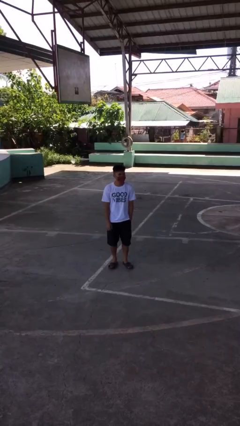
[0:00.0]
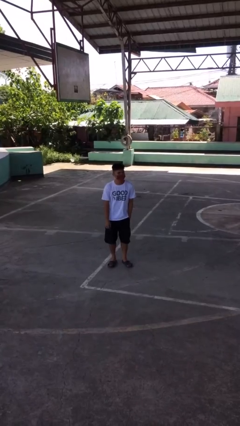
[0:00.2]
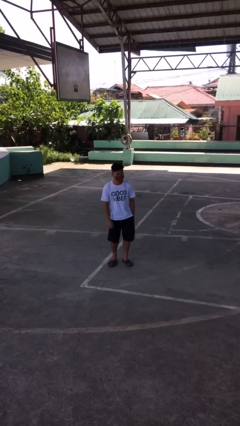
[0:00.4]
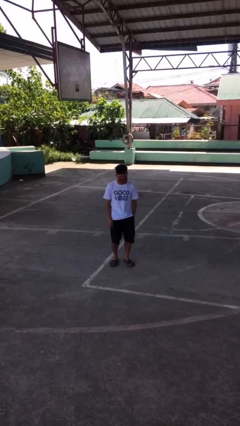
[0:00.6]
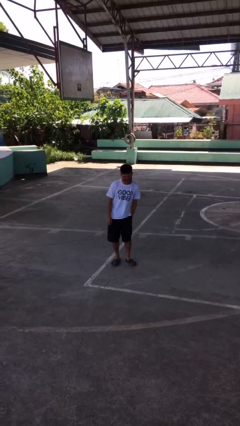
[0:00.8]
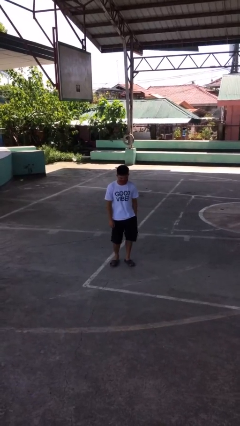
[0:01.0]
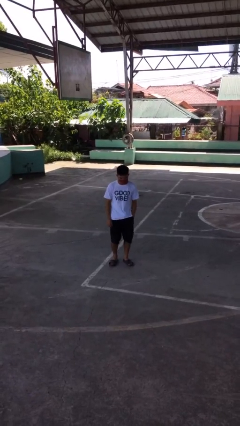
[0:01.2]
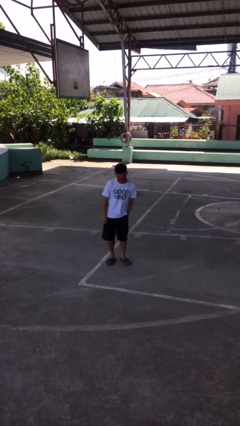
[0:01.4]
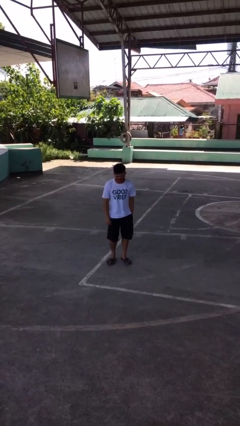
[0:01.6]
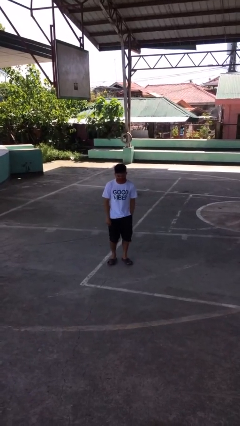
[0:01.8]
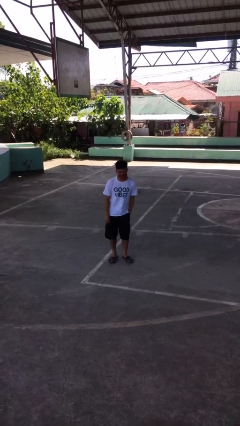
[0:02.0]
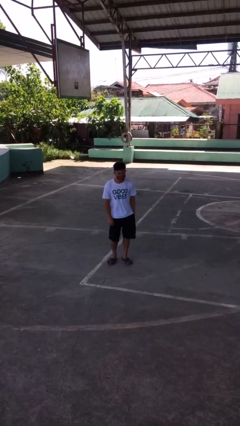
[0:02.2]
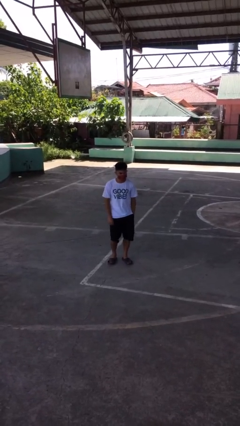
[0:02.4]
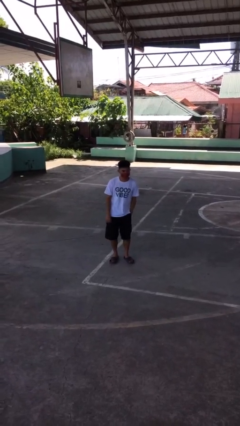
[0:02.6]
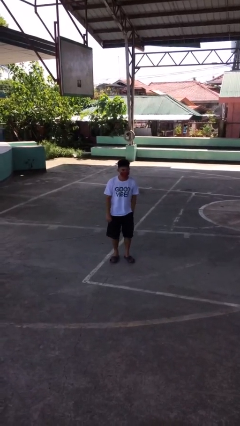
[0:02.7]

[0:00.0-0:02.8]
person wiggles hips

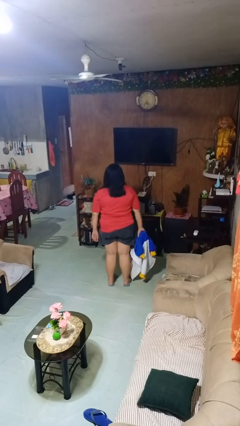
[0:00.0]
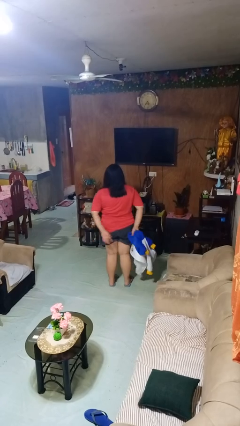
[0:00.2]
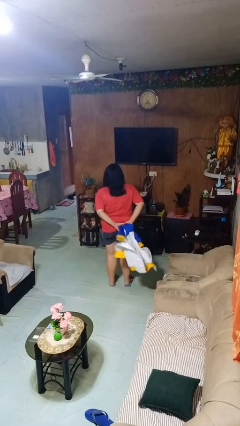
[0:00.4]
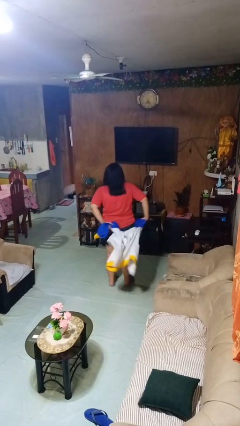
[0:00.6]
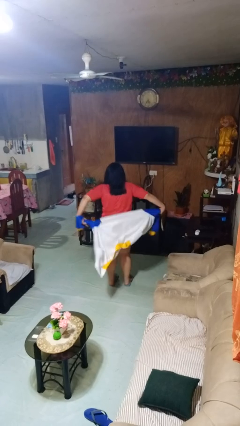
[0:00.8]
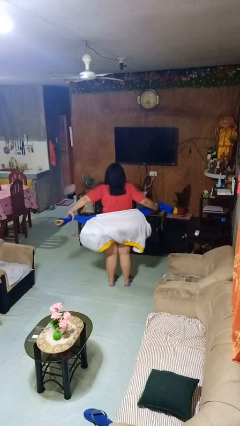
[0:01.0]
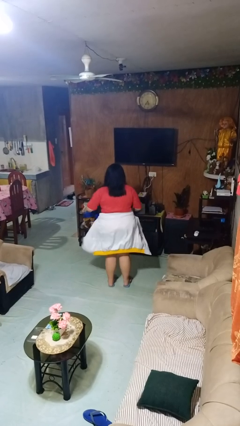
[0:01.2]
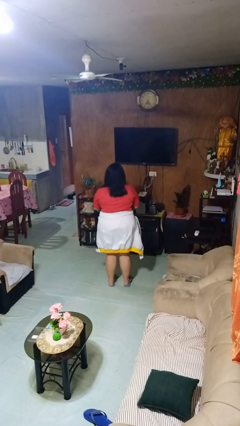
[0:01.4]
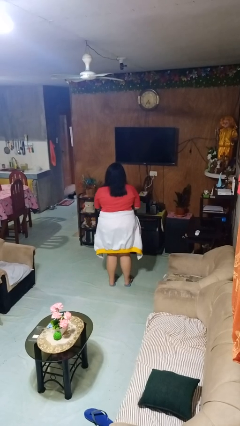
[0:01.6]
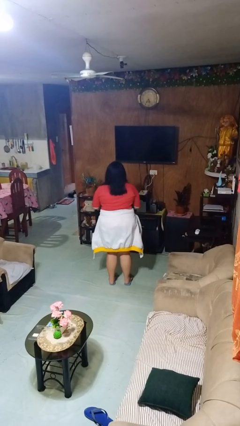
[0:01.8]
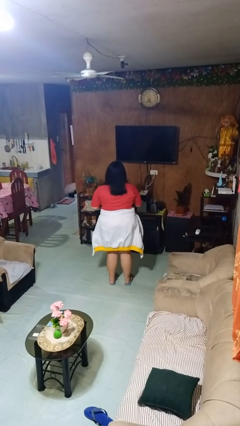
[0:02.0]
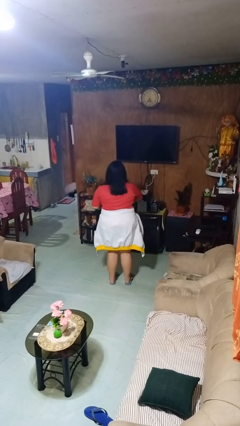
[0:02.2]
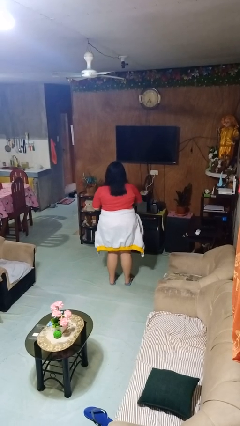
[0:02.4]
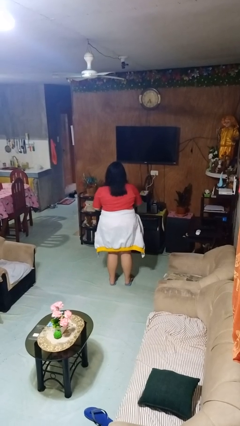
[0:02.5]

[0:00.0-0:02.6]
person ties jacket around waist

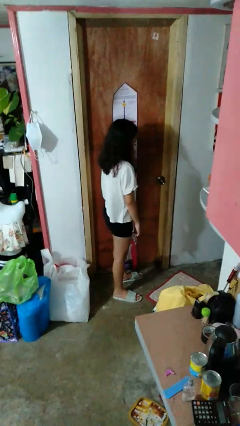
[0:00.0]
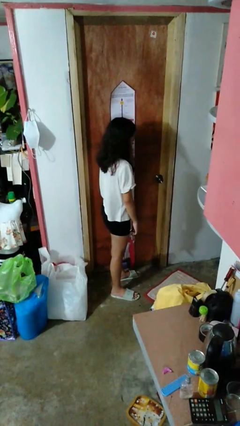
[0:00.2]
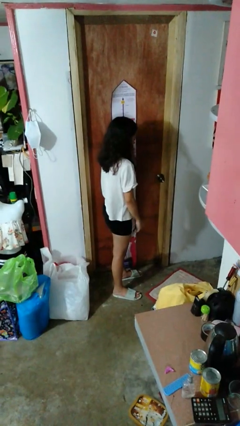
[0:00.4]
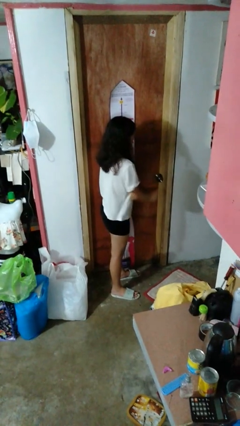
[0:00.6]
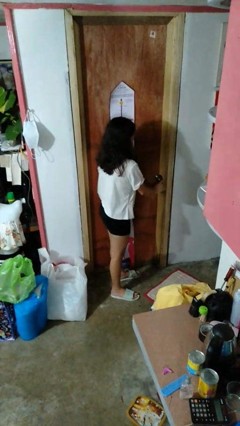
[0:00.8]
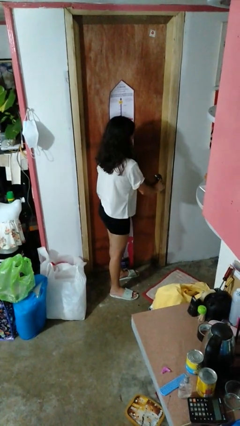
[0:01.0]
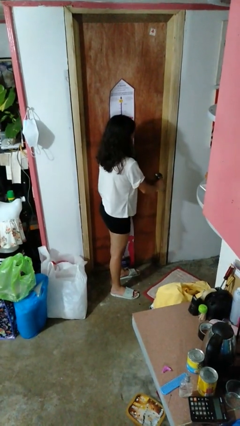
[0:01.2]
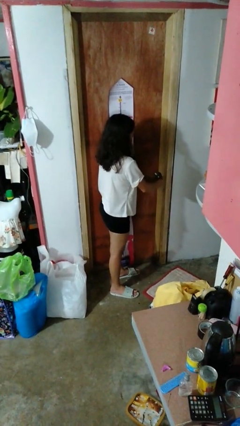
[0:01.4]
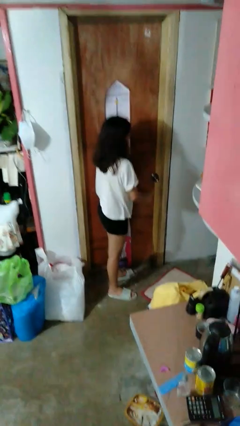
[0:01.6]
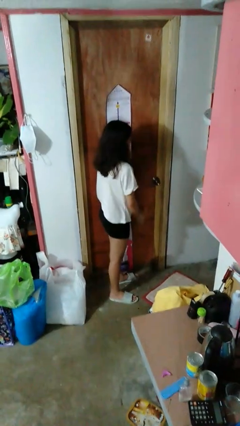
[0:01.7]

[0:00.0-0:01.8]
person unlocks door with keys

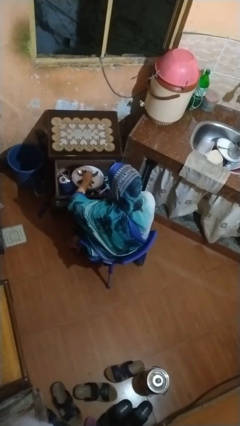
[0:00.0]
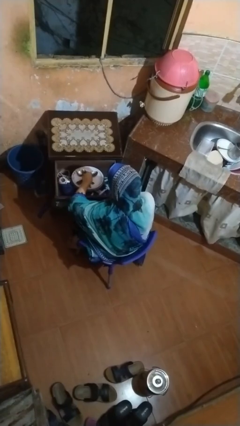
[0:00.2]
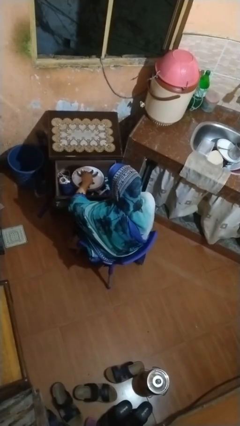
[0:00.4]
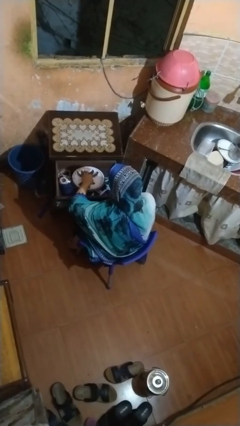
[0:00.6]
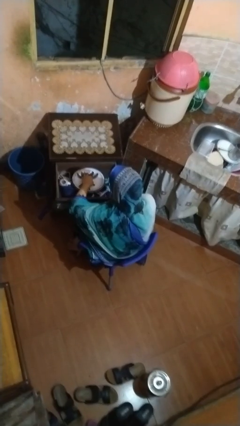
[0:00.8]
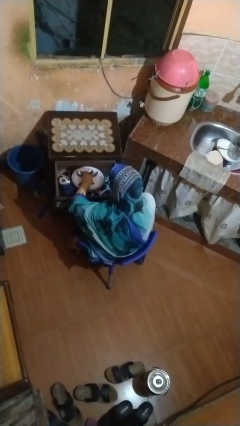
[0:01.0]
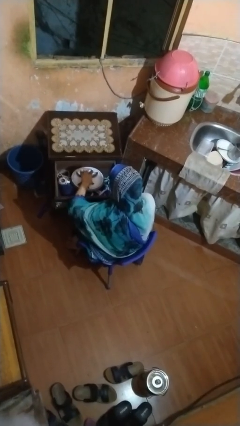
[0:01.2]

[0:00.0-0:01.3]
person puts object into kitchen drawer

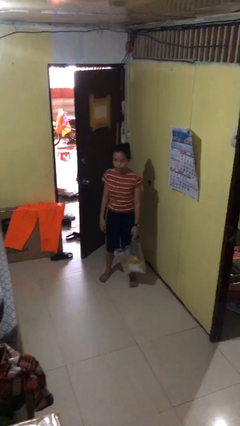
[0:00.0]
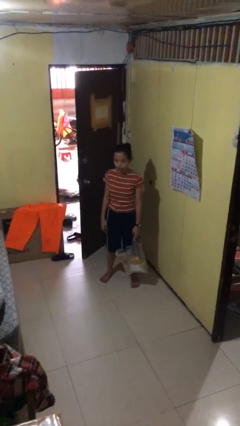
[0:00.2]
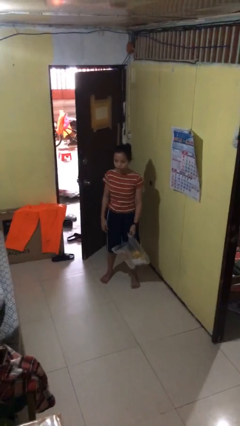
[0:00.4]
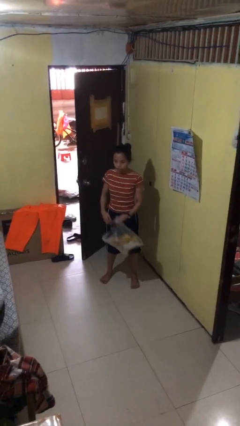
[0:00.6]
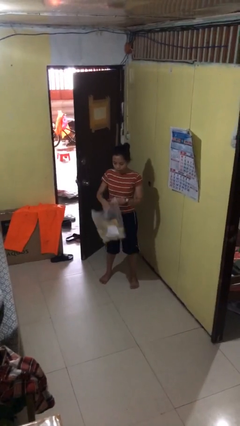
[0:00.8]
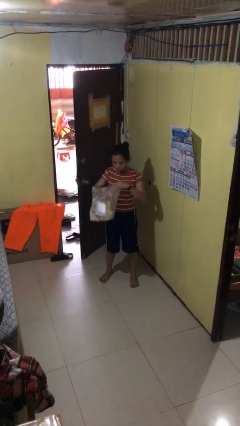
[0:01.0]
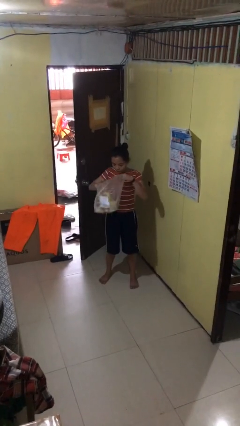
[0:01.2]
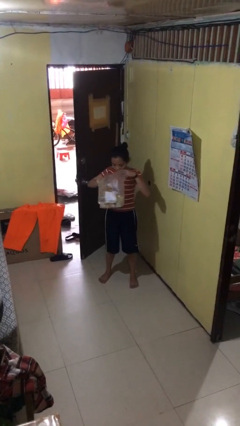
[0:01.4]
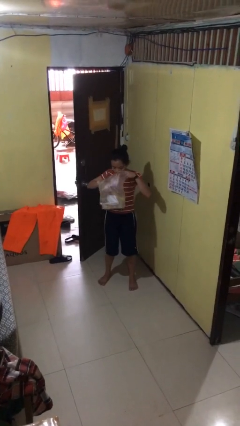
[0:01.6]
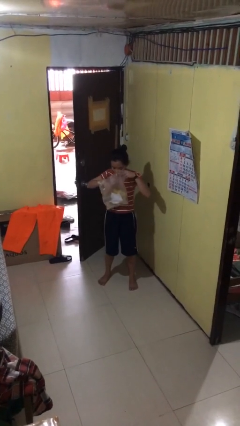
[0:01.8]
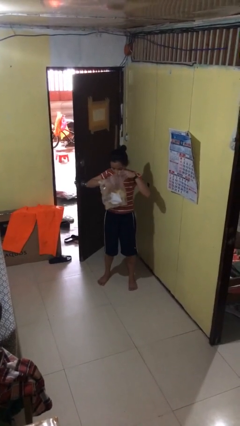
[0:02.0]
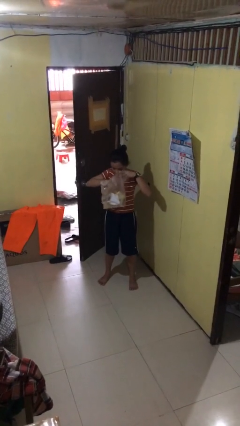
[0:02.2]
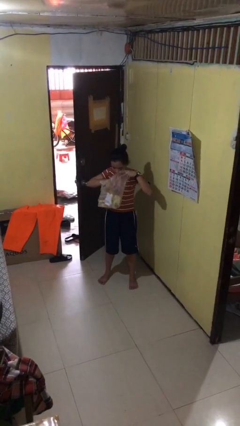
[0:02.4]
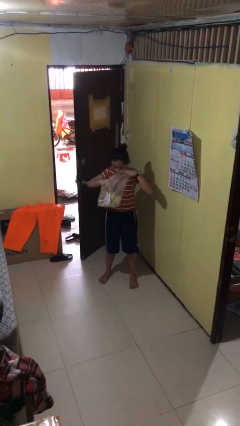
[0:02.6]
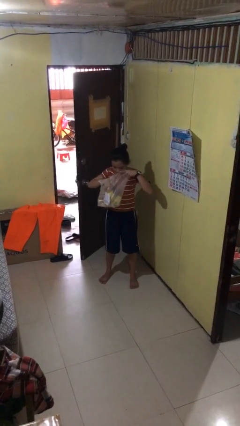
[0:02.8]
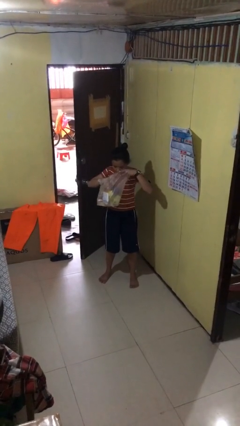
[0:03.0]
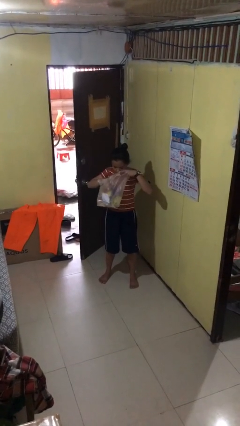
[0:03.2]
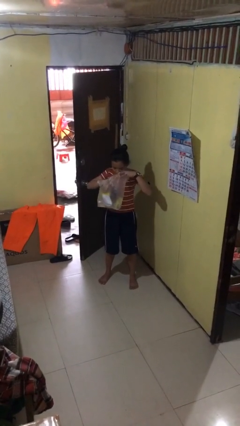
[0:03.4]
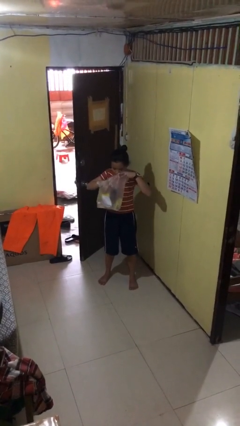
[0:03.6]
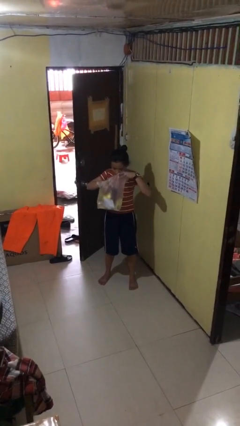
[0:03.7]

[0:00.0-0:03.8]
person searches in bag

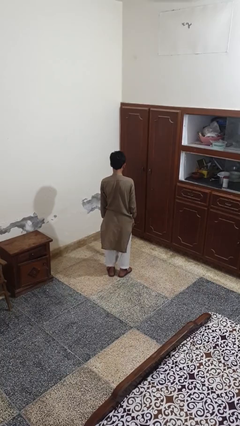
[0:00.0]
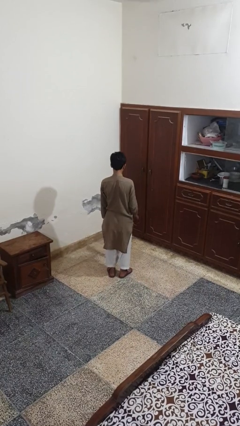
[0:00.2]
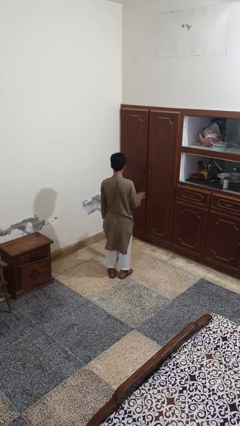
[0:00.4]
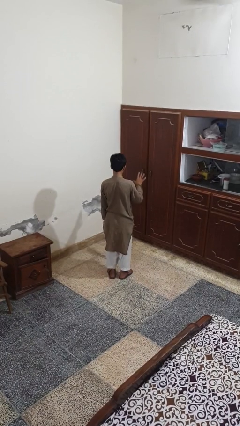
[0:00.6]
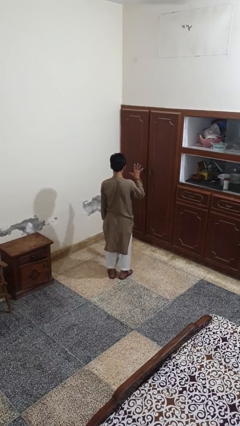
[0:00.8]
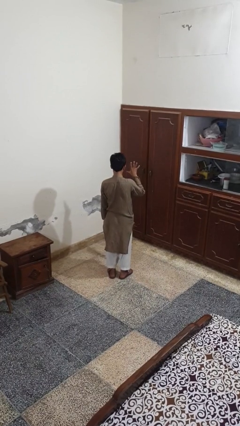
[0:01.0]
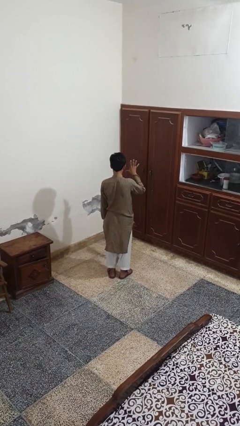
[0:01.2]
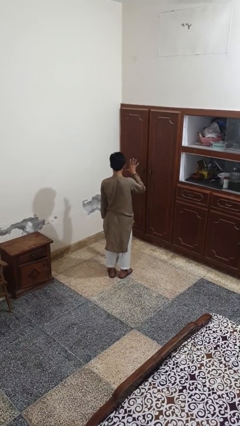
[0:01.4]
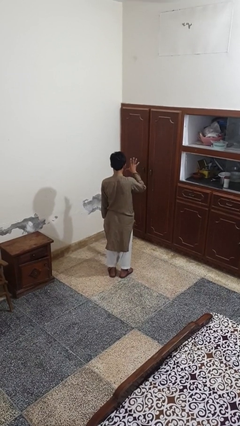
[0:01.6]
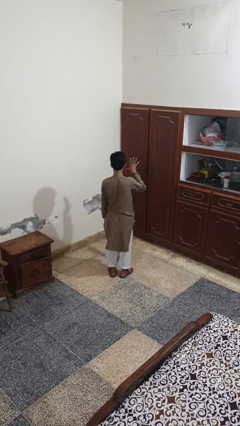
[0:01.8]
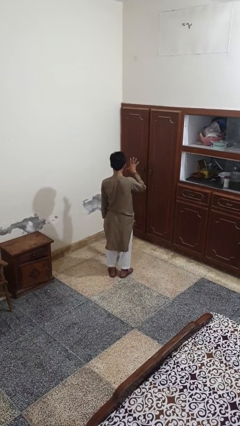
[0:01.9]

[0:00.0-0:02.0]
person gestures number five

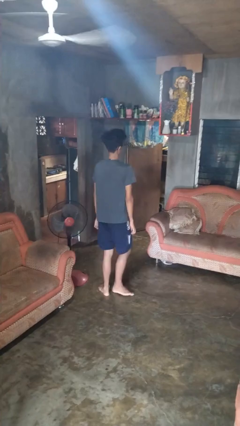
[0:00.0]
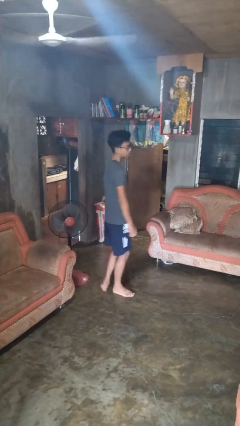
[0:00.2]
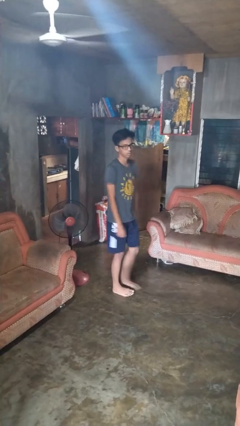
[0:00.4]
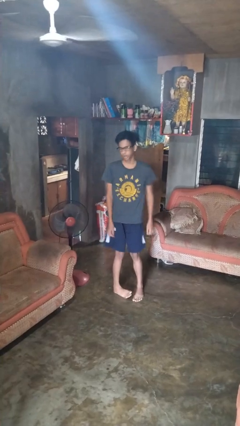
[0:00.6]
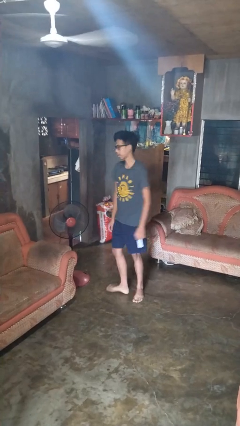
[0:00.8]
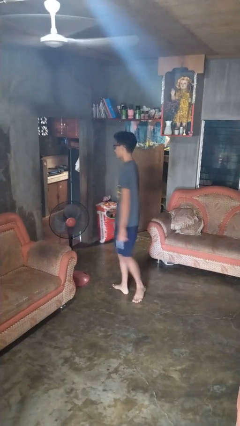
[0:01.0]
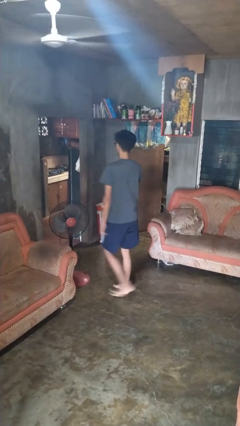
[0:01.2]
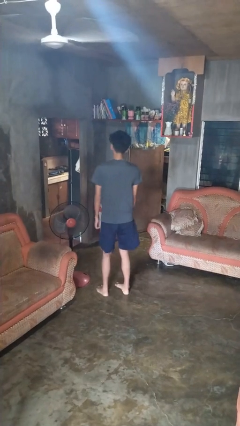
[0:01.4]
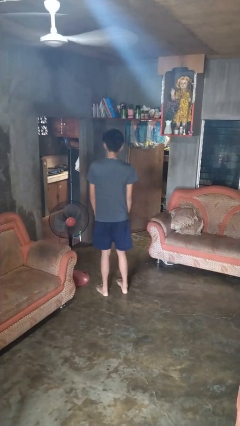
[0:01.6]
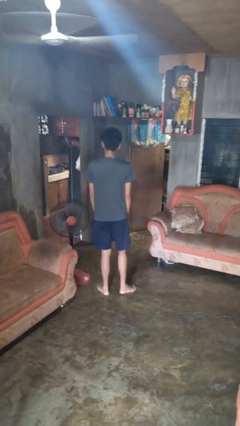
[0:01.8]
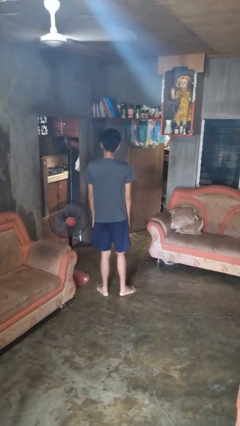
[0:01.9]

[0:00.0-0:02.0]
person twirls

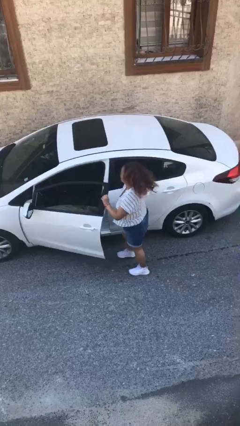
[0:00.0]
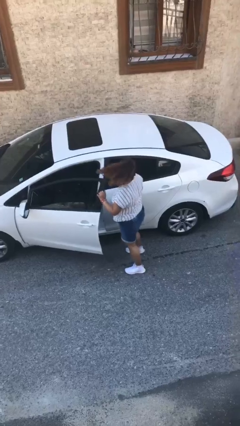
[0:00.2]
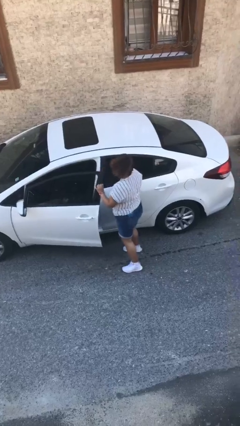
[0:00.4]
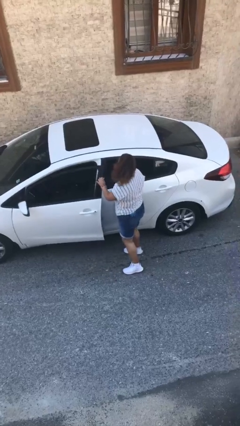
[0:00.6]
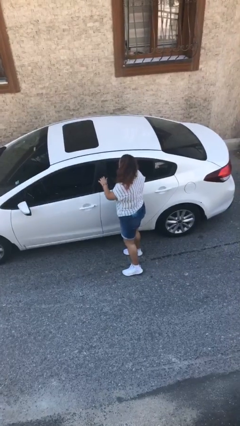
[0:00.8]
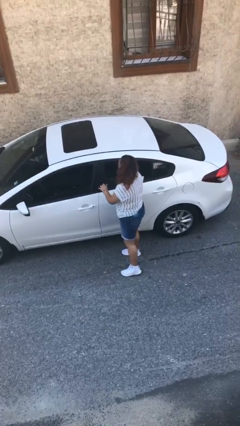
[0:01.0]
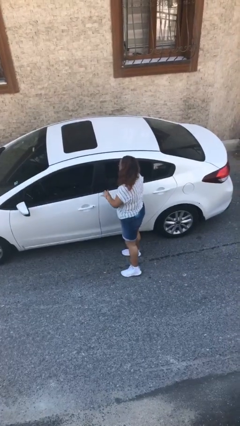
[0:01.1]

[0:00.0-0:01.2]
person closes car door
